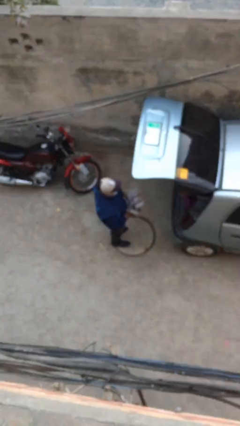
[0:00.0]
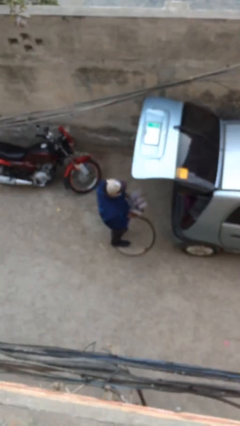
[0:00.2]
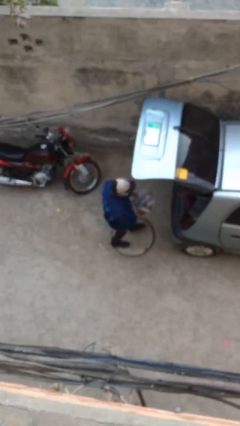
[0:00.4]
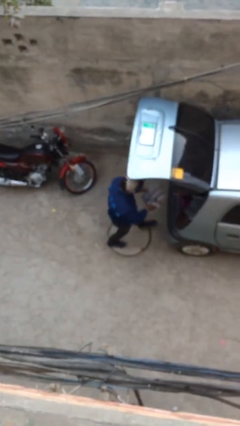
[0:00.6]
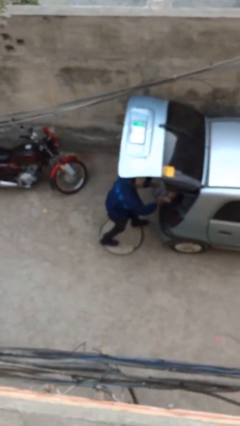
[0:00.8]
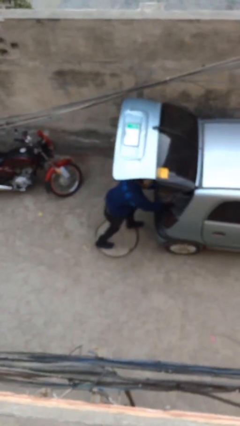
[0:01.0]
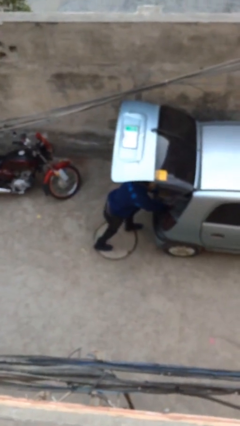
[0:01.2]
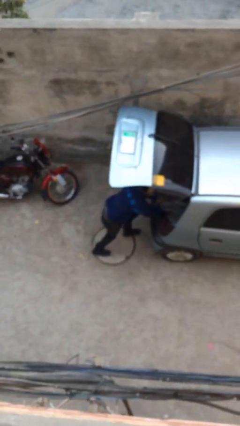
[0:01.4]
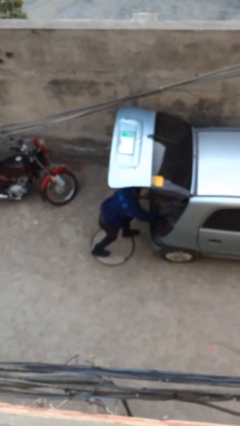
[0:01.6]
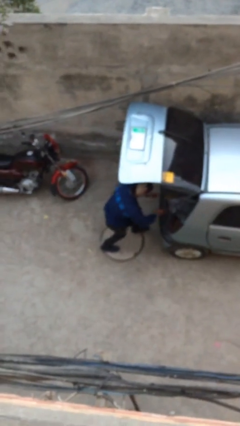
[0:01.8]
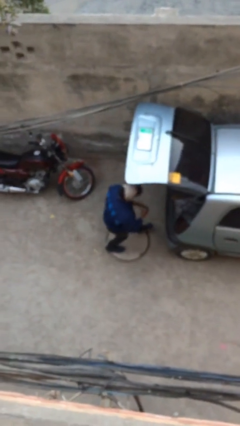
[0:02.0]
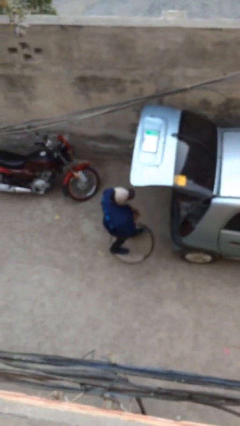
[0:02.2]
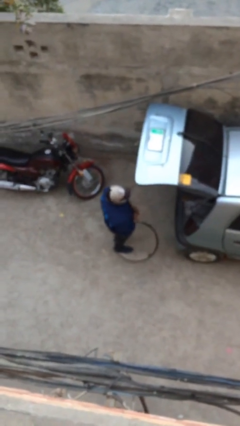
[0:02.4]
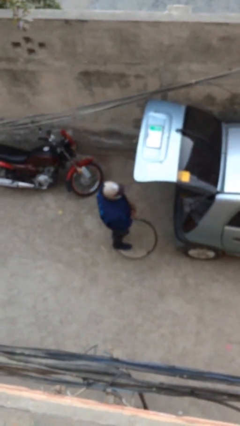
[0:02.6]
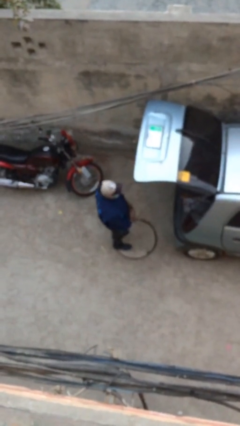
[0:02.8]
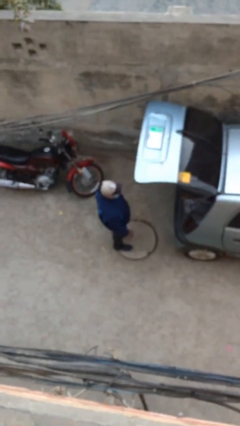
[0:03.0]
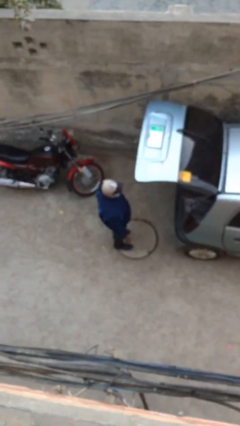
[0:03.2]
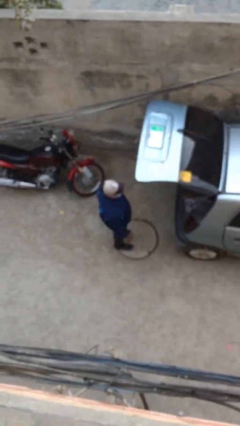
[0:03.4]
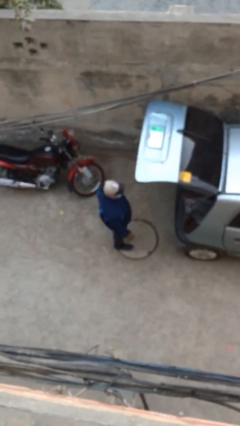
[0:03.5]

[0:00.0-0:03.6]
person loads car

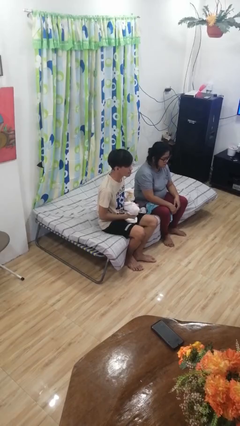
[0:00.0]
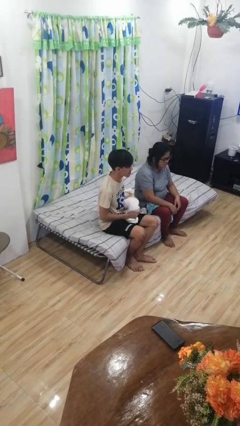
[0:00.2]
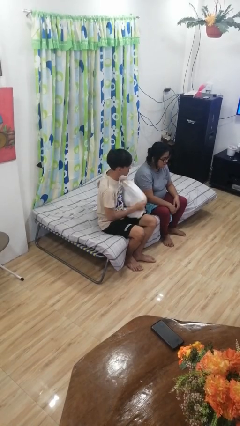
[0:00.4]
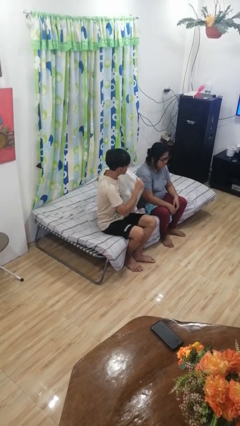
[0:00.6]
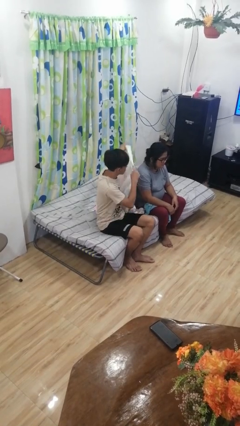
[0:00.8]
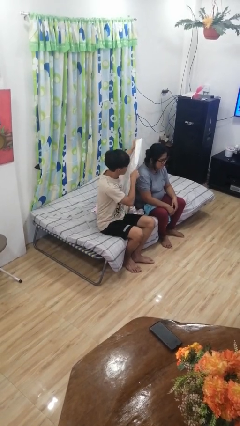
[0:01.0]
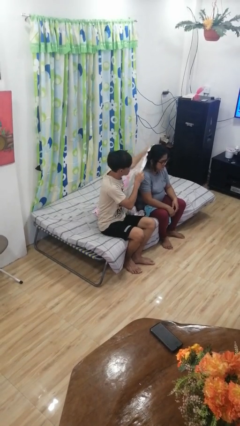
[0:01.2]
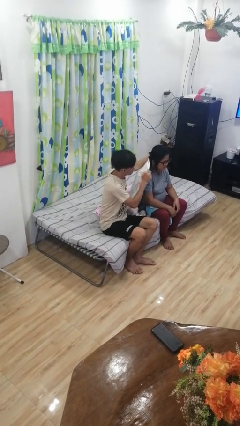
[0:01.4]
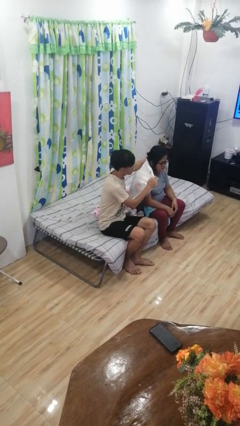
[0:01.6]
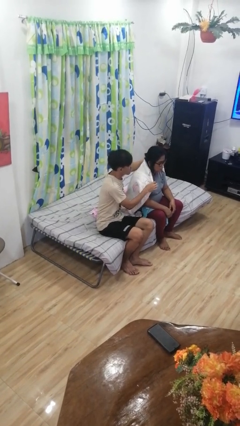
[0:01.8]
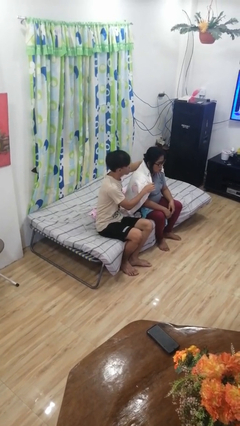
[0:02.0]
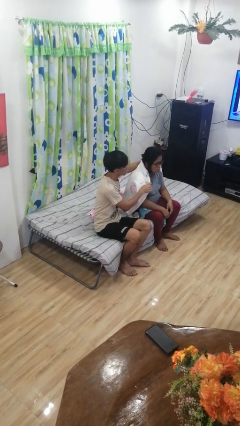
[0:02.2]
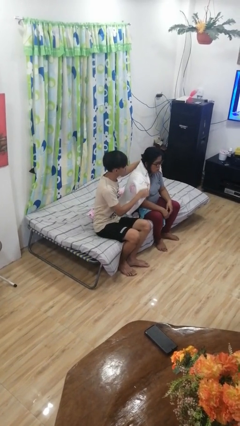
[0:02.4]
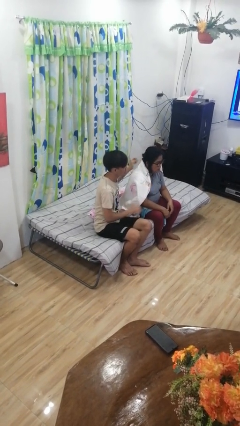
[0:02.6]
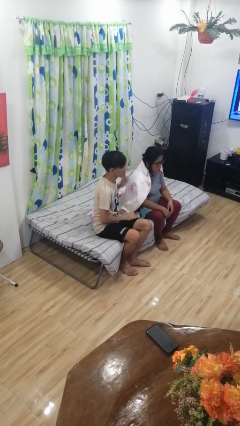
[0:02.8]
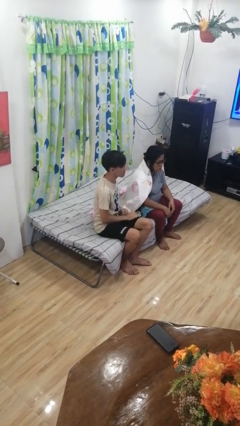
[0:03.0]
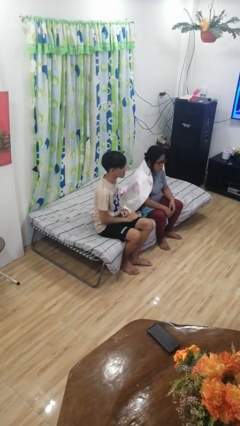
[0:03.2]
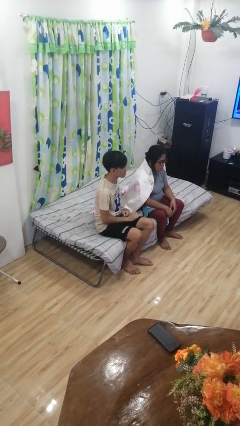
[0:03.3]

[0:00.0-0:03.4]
person covers friend with blanket

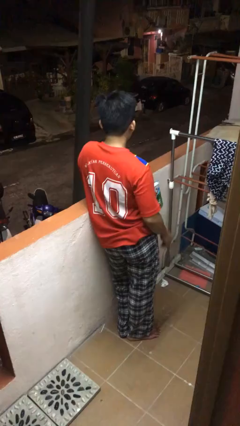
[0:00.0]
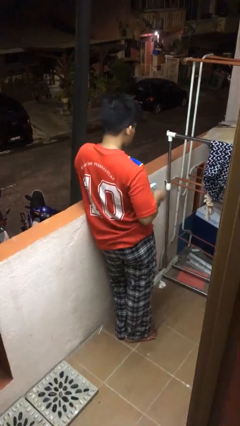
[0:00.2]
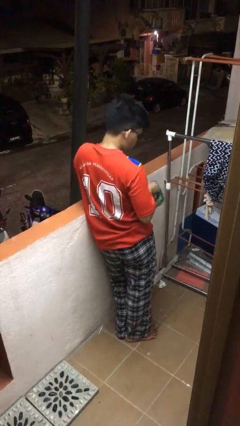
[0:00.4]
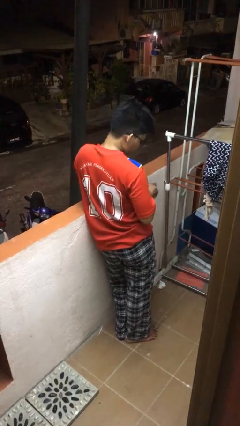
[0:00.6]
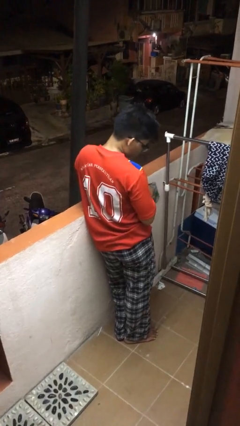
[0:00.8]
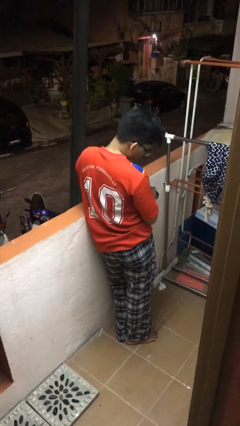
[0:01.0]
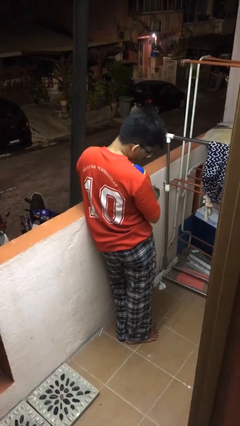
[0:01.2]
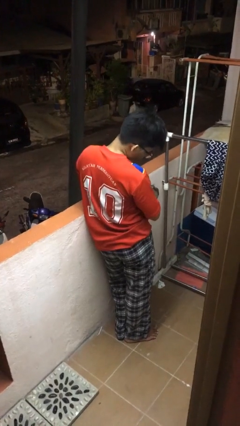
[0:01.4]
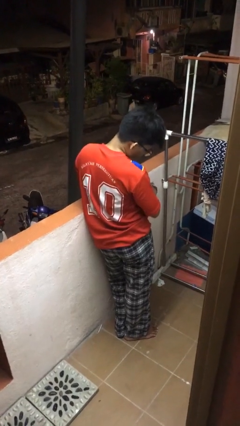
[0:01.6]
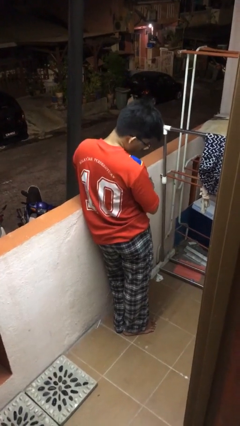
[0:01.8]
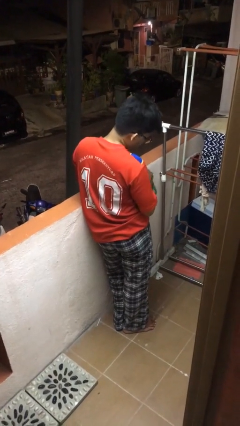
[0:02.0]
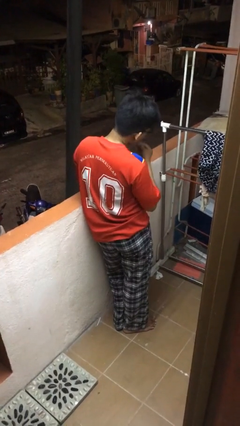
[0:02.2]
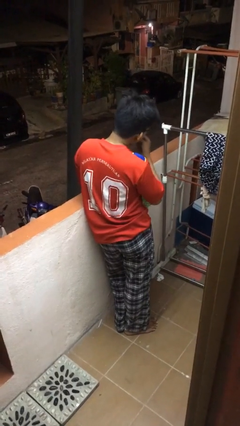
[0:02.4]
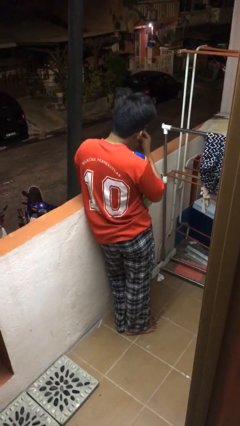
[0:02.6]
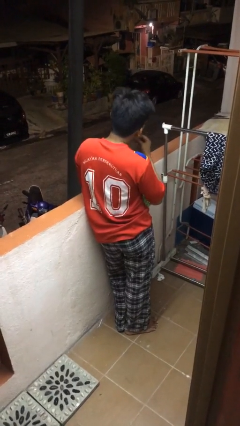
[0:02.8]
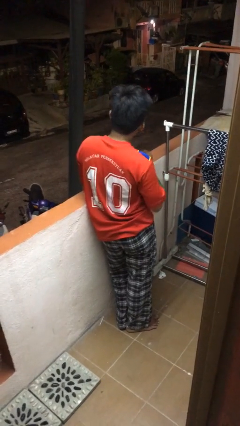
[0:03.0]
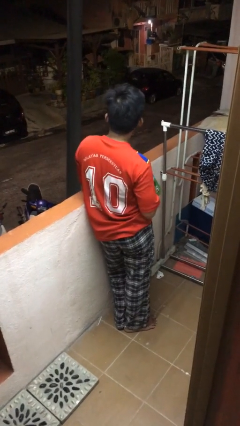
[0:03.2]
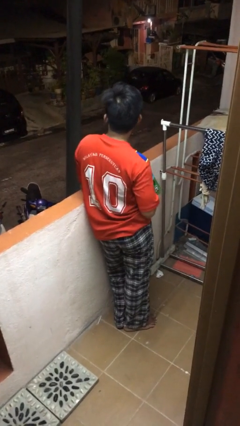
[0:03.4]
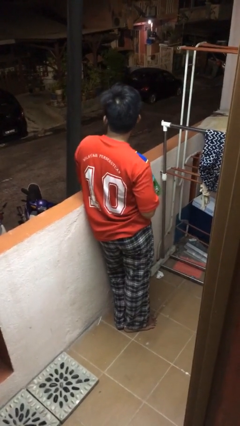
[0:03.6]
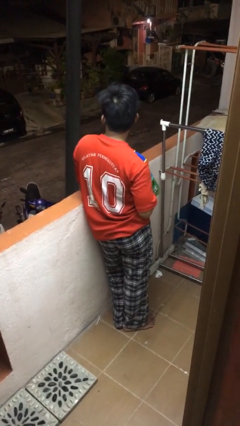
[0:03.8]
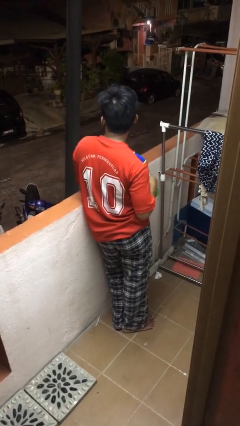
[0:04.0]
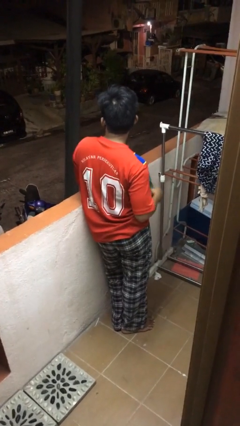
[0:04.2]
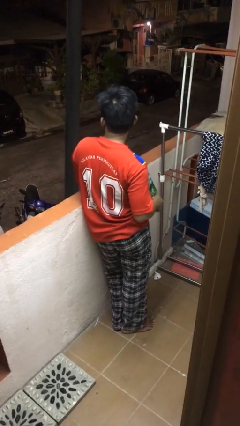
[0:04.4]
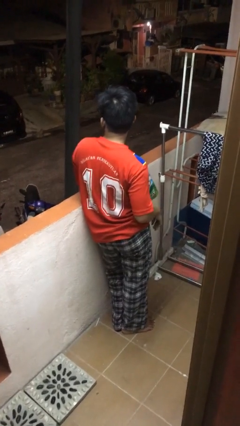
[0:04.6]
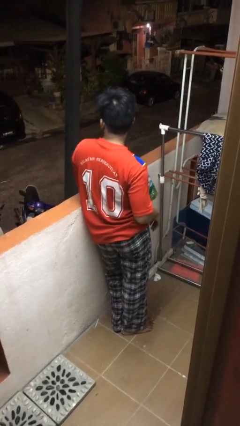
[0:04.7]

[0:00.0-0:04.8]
person eats snack from bag

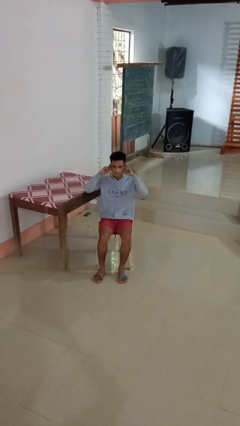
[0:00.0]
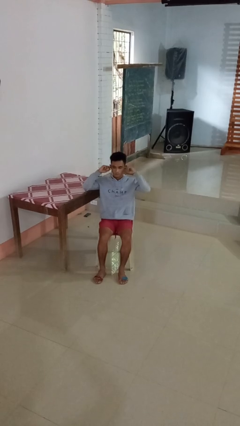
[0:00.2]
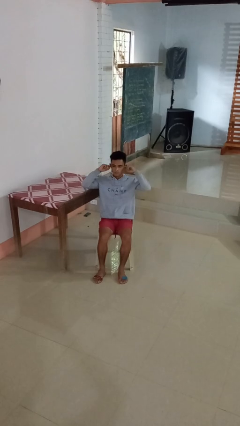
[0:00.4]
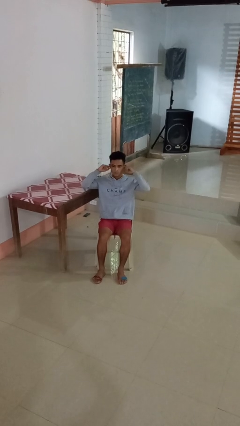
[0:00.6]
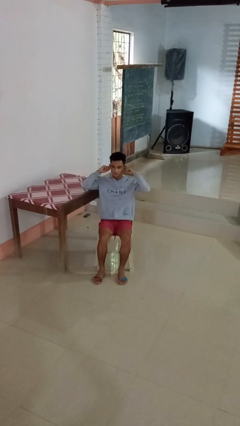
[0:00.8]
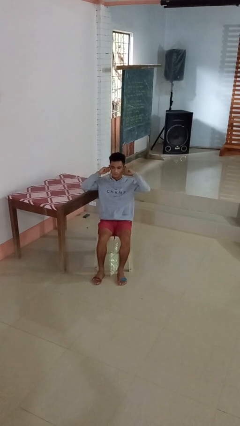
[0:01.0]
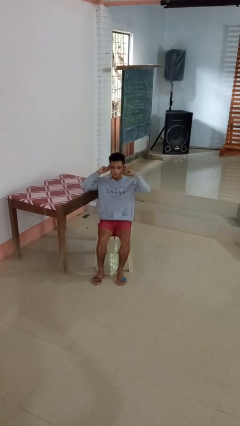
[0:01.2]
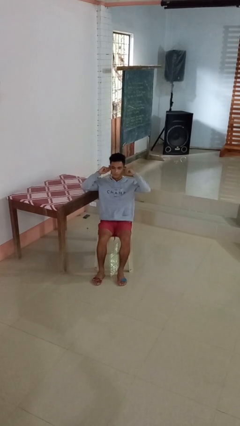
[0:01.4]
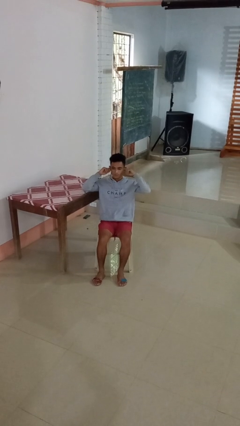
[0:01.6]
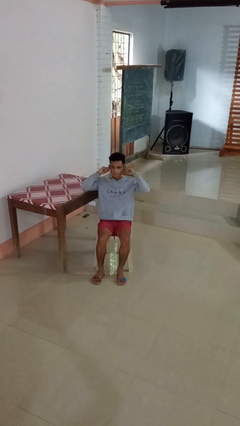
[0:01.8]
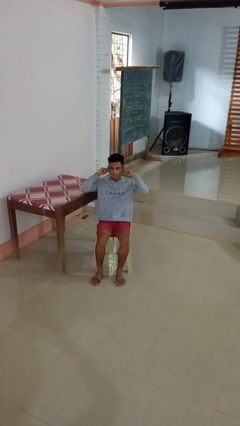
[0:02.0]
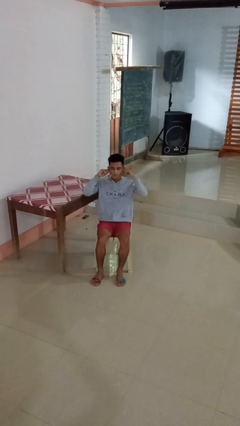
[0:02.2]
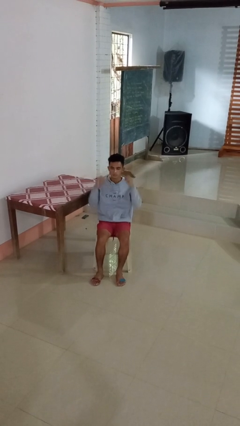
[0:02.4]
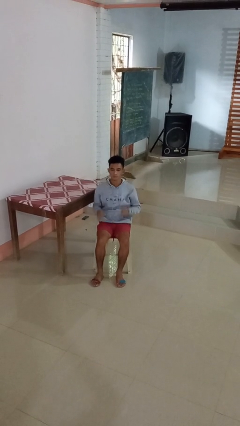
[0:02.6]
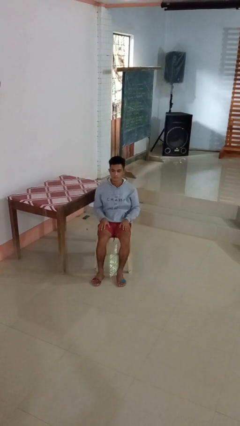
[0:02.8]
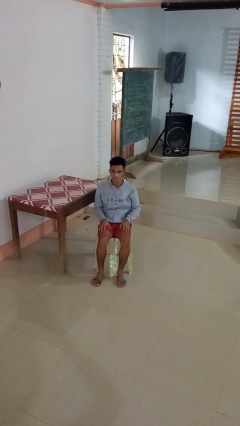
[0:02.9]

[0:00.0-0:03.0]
person puts fingers in ear

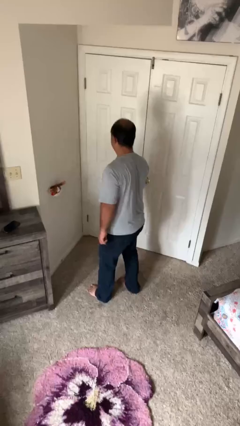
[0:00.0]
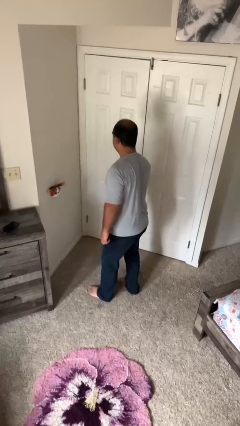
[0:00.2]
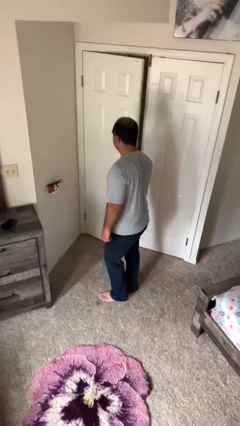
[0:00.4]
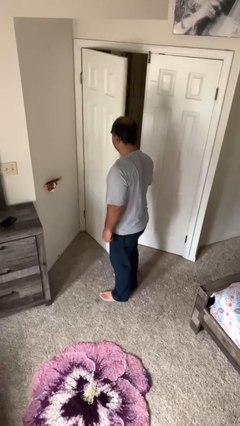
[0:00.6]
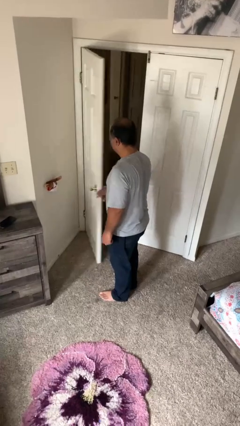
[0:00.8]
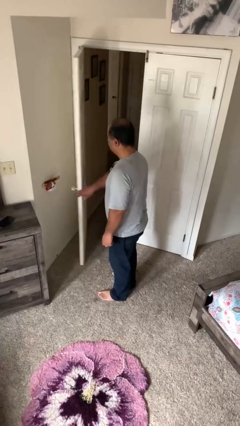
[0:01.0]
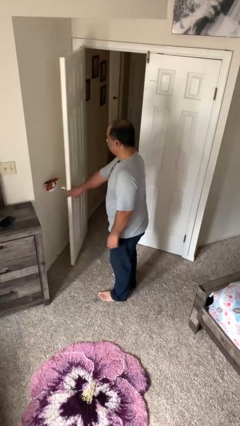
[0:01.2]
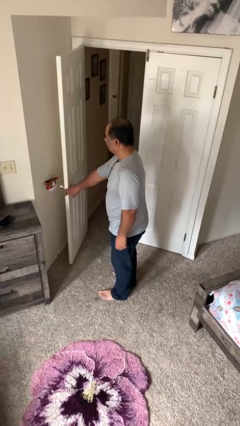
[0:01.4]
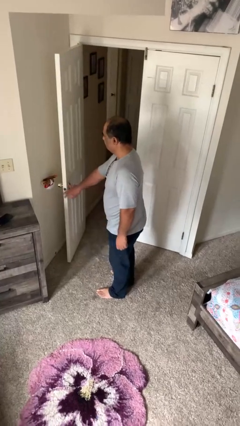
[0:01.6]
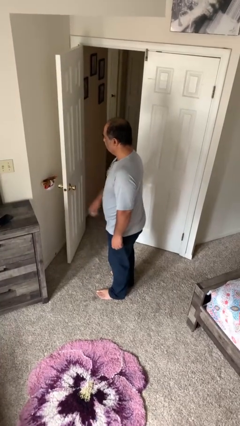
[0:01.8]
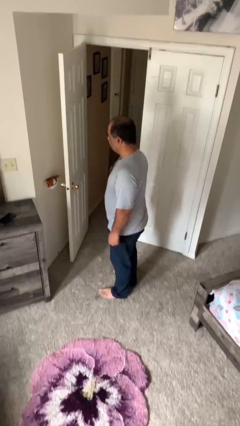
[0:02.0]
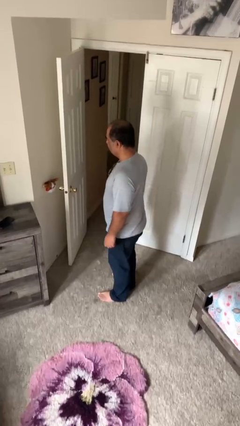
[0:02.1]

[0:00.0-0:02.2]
person opens facility door

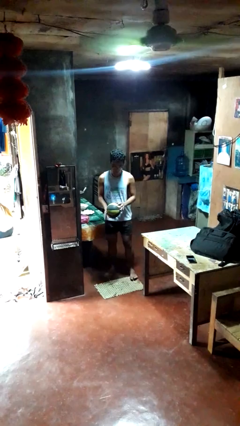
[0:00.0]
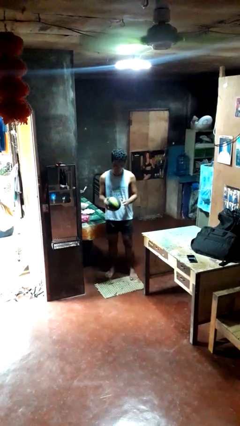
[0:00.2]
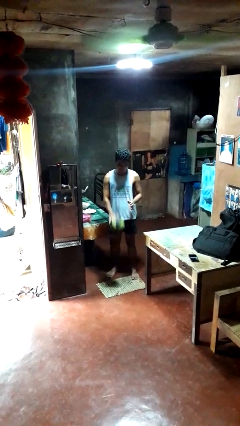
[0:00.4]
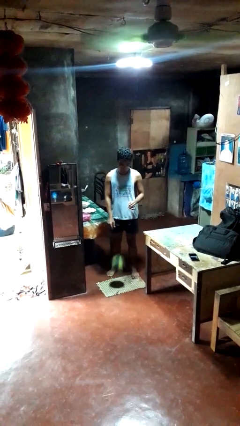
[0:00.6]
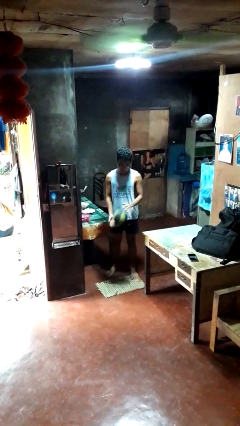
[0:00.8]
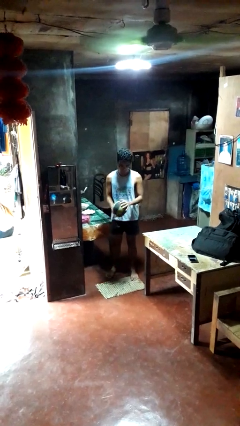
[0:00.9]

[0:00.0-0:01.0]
person bounces ball on floor
